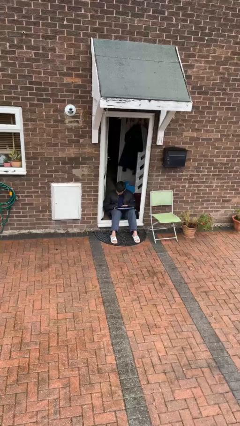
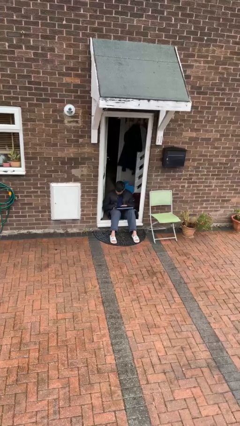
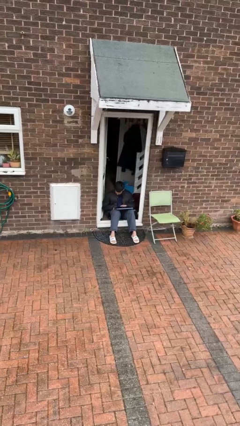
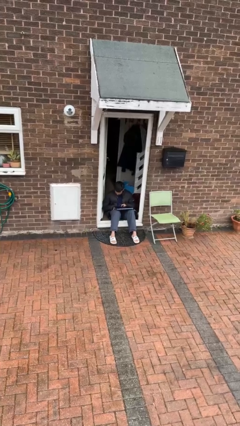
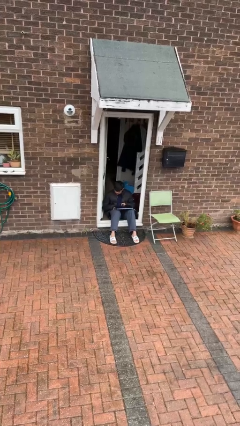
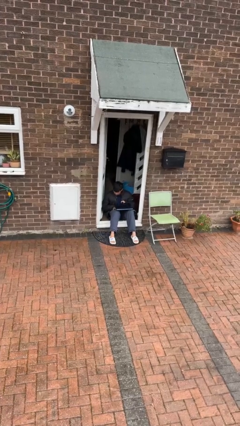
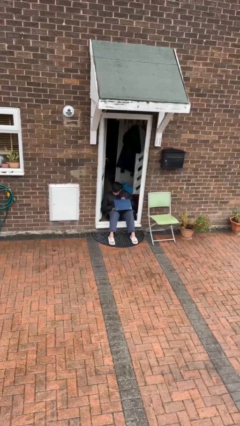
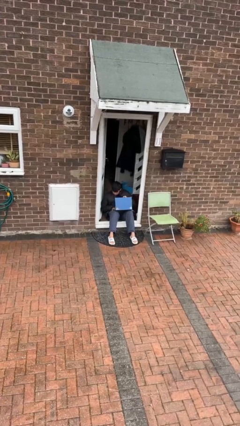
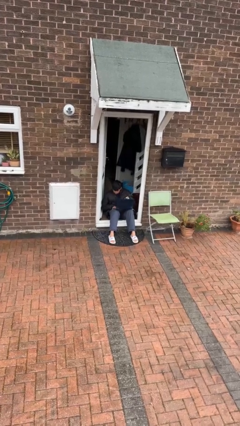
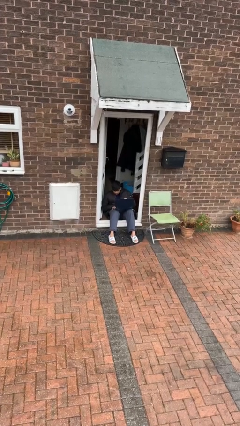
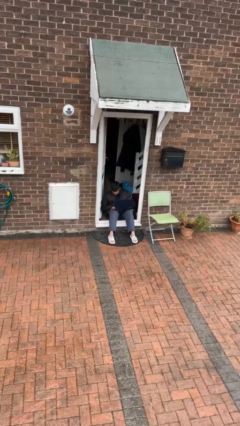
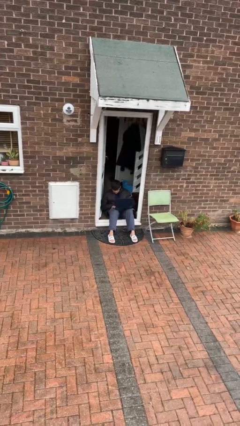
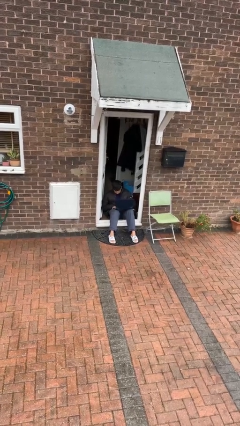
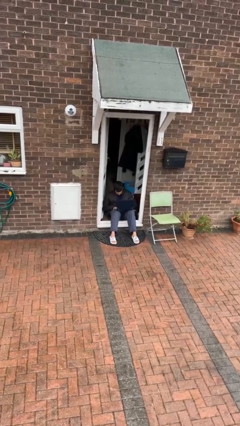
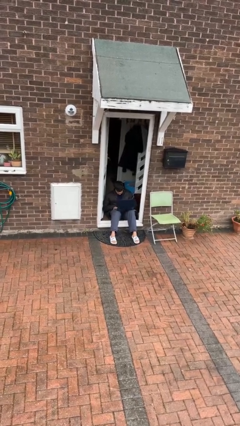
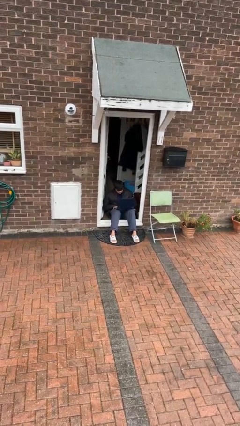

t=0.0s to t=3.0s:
person opens laptop

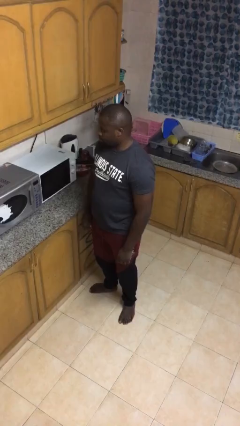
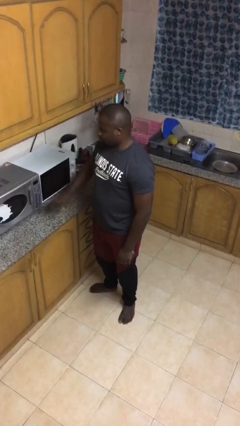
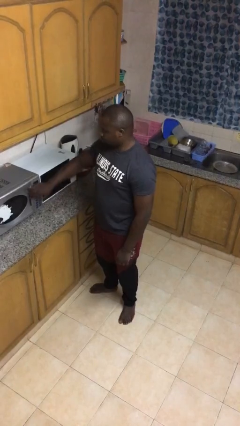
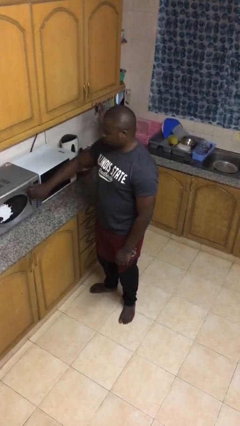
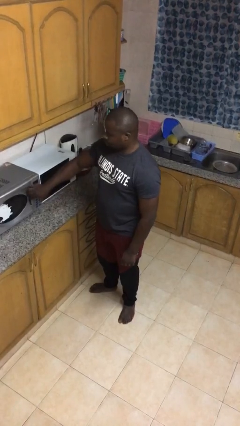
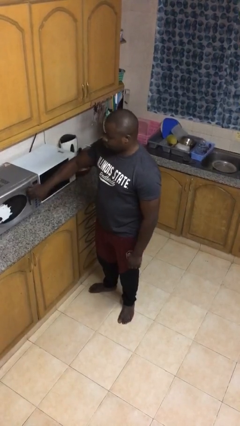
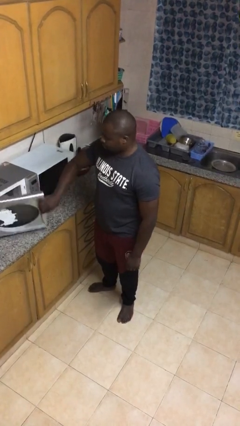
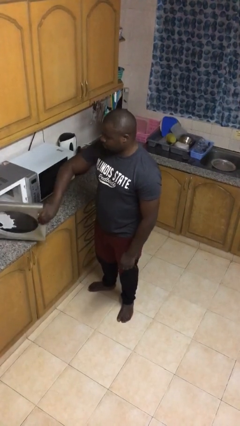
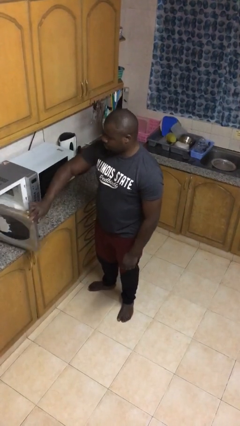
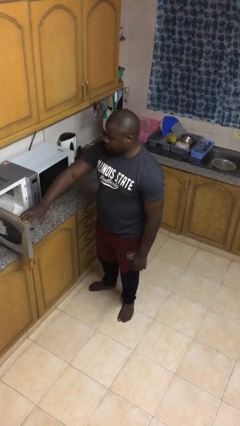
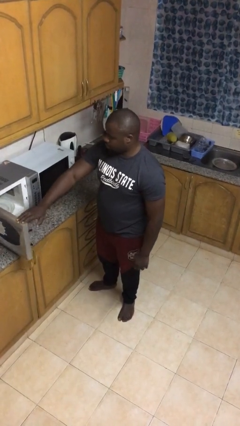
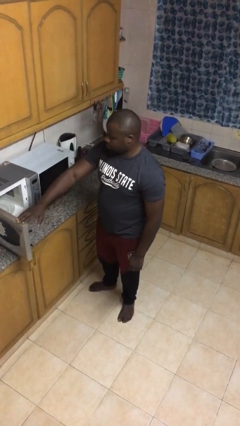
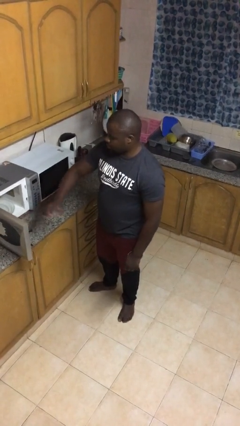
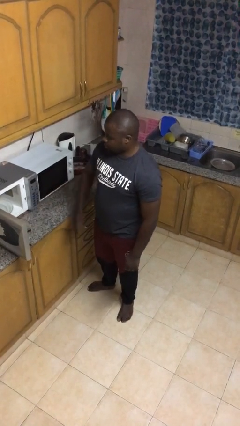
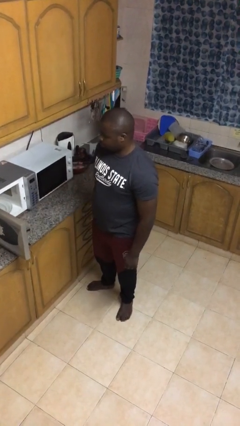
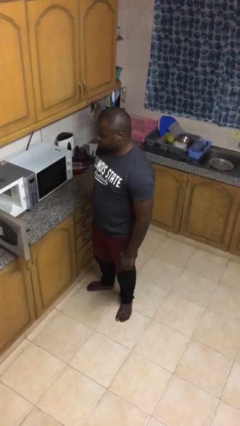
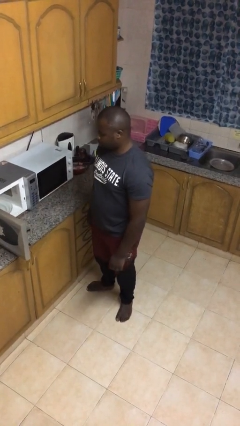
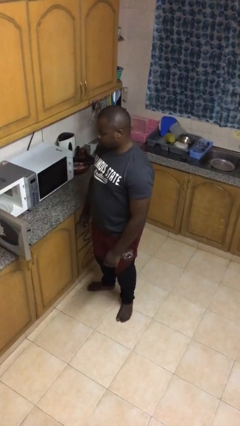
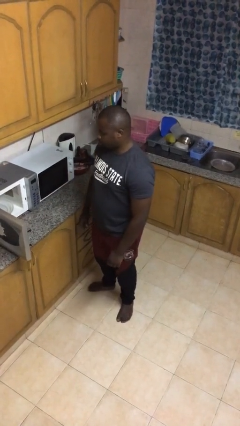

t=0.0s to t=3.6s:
person opens microwave

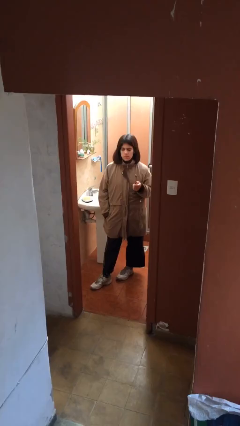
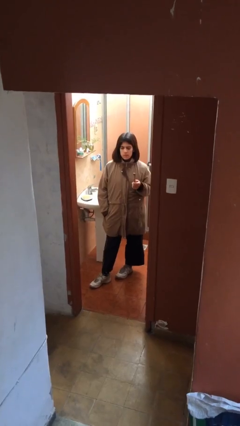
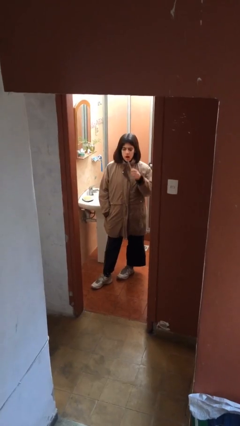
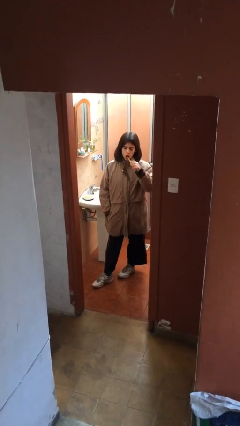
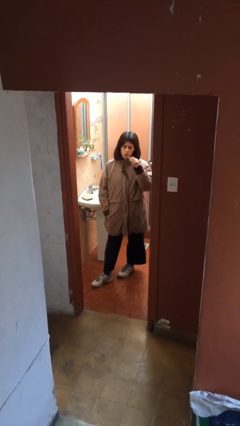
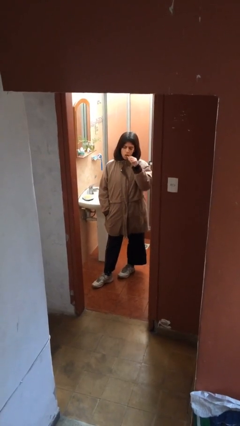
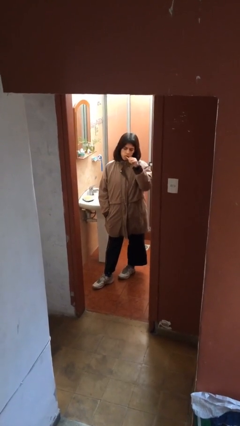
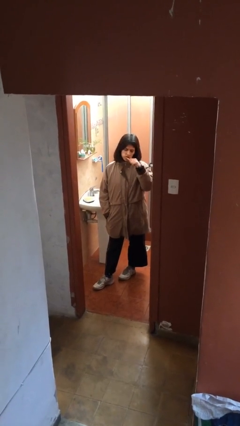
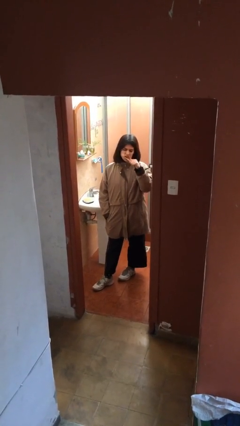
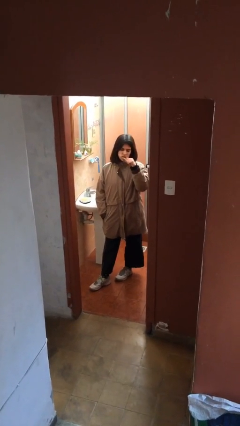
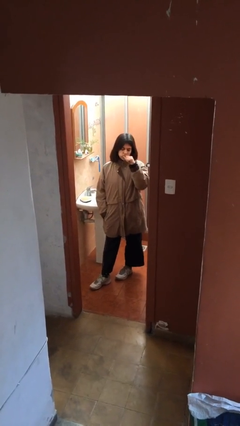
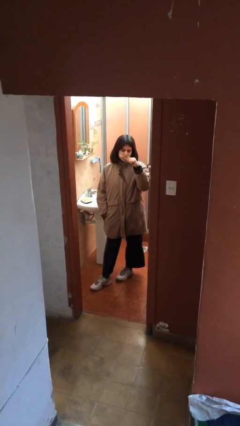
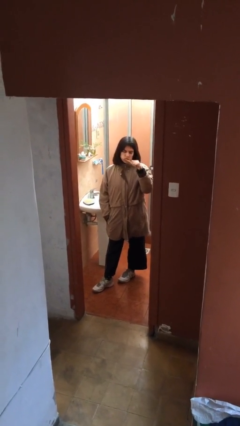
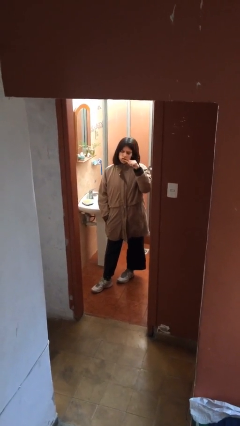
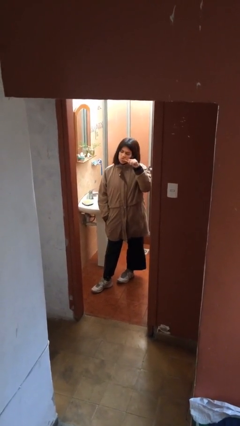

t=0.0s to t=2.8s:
person brushes teeth

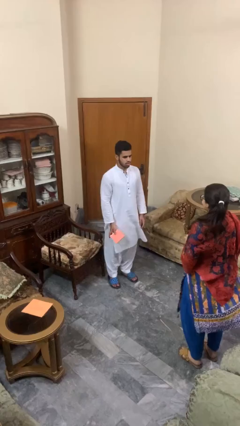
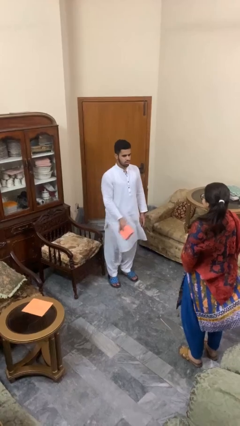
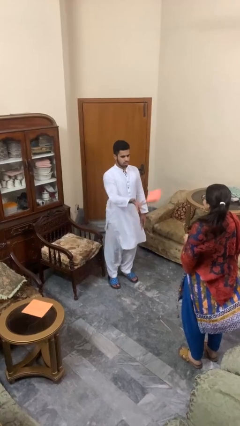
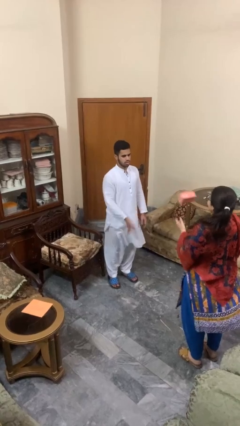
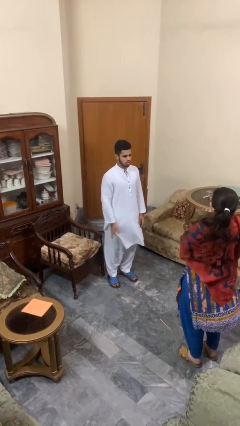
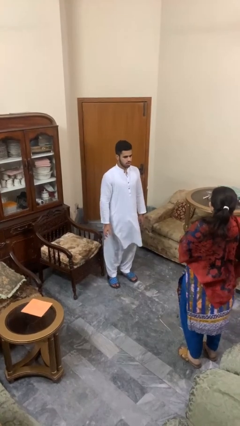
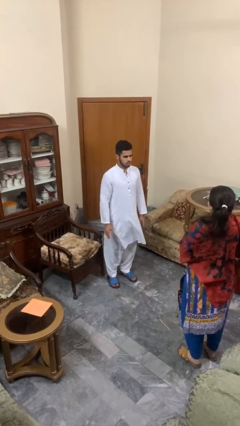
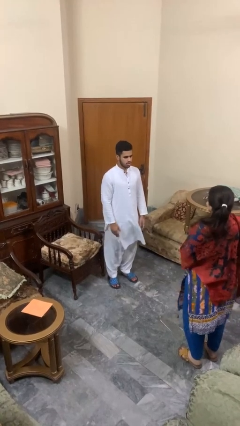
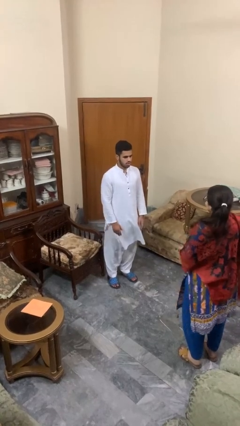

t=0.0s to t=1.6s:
person throws object to person

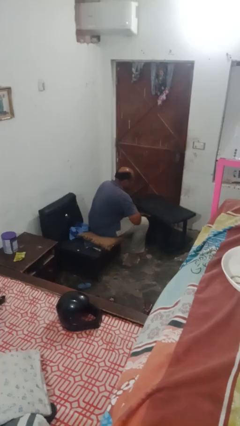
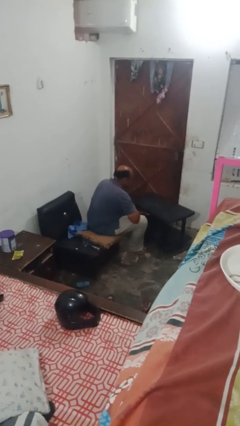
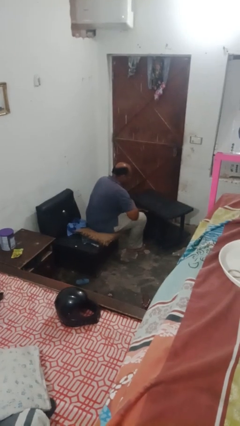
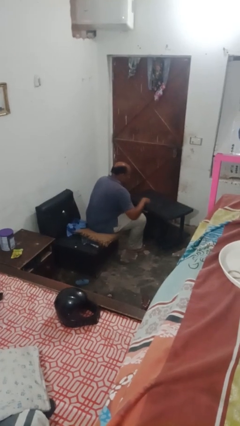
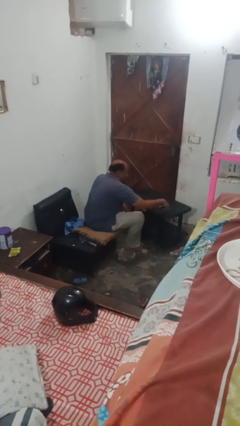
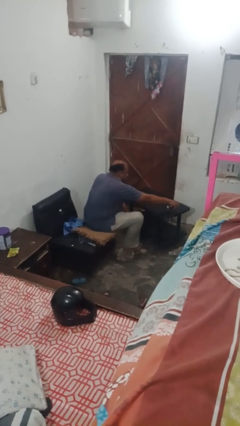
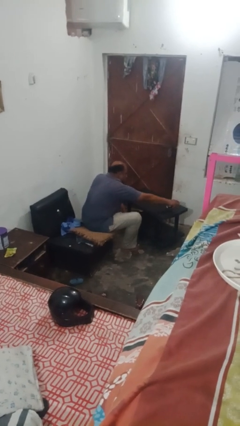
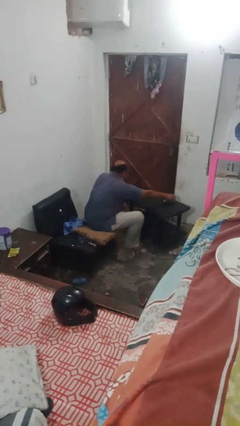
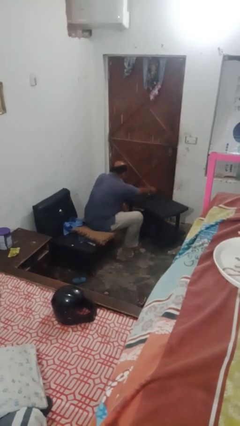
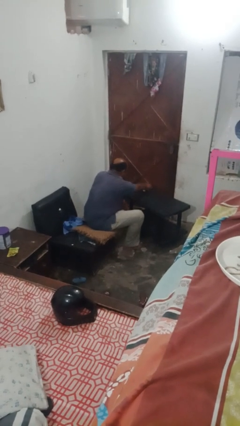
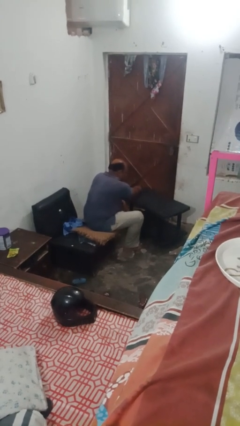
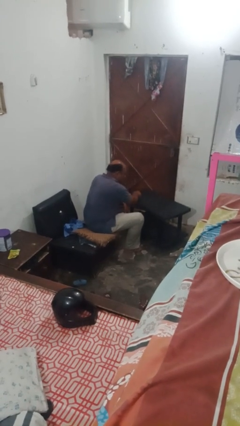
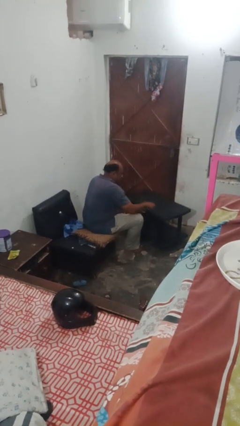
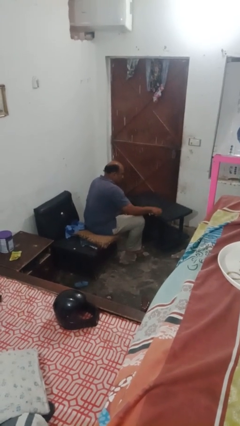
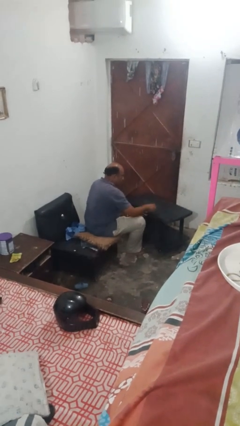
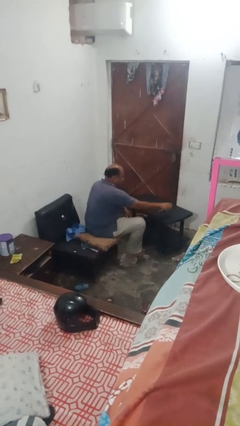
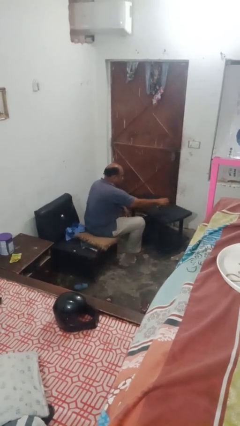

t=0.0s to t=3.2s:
person sprays from bottle

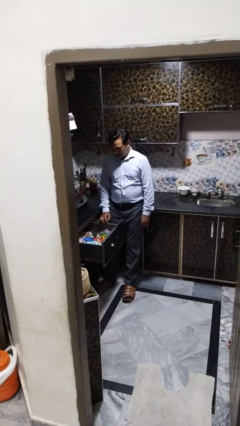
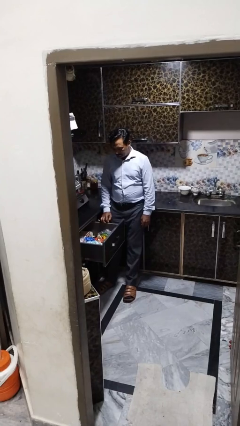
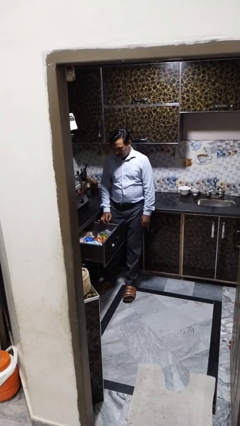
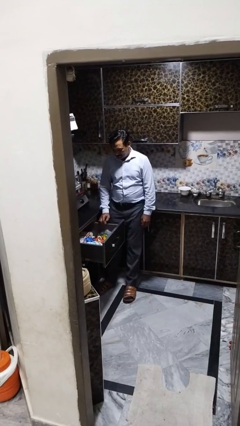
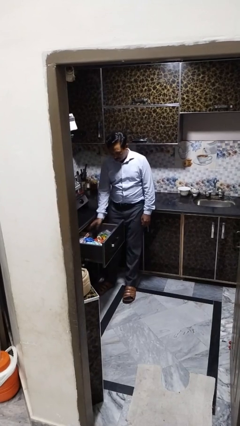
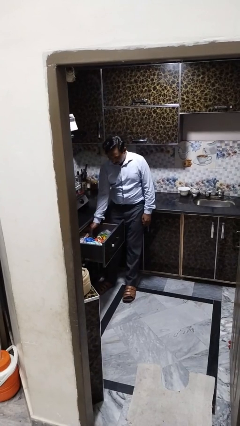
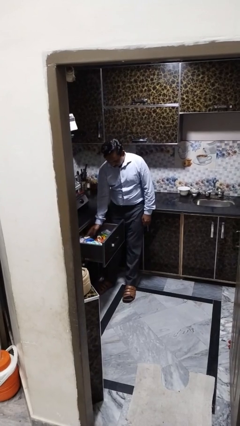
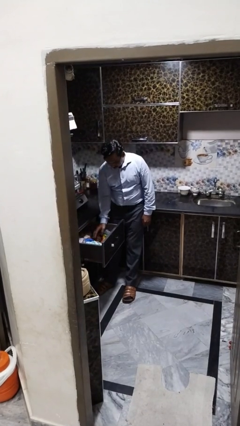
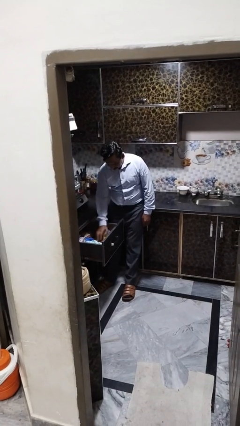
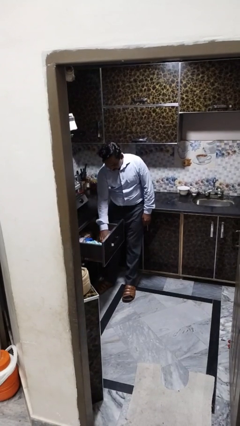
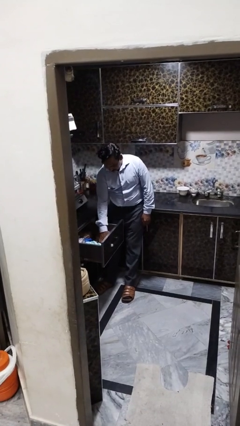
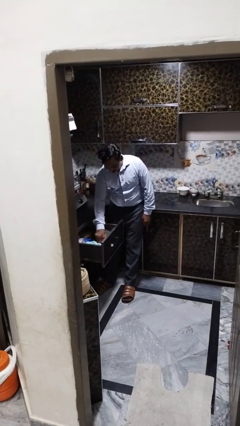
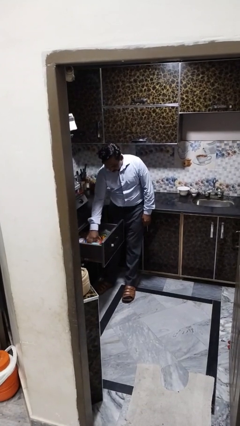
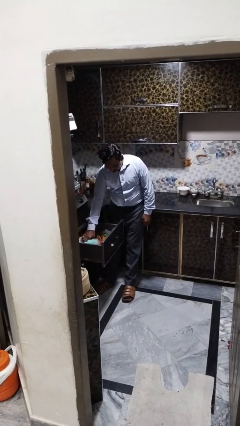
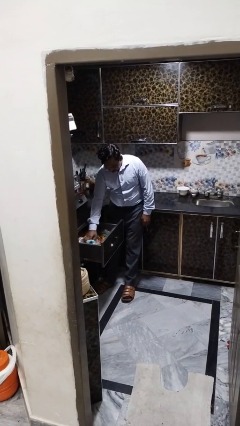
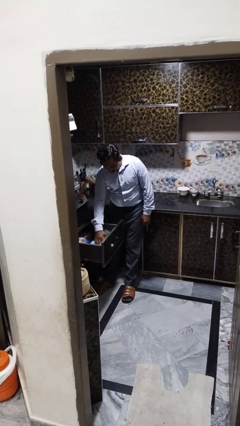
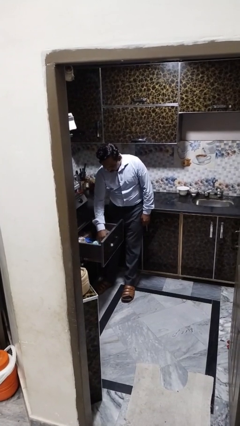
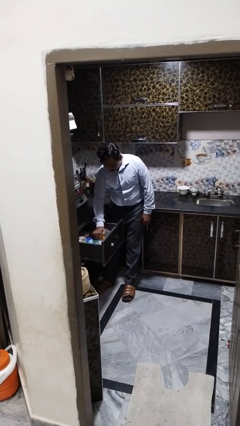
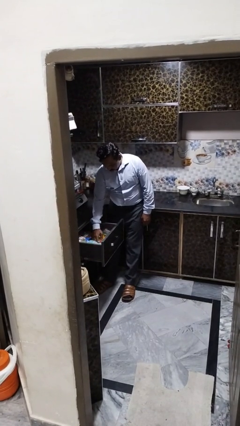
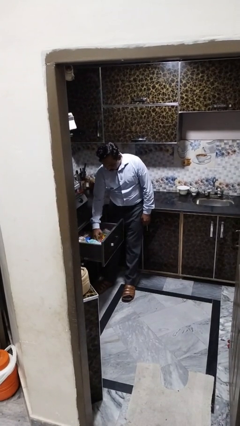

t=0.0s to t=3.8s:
person searches in kitchen drawer
